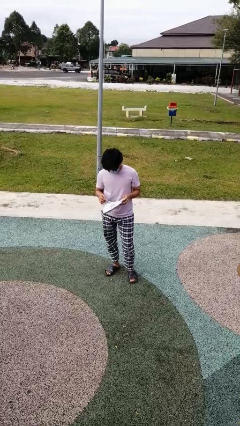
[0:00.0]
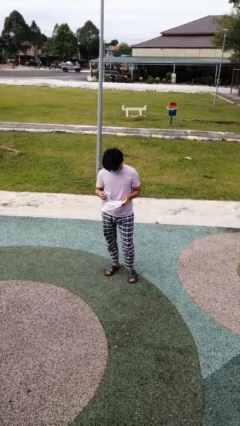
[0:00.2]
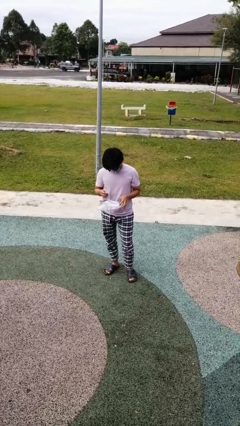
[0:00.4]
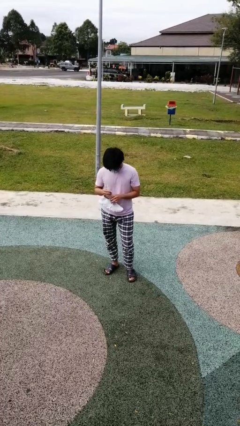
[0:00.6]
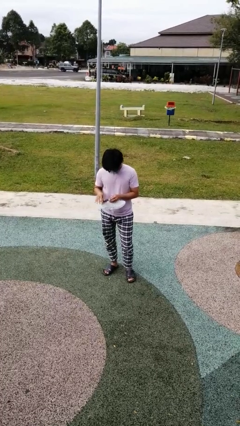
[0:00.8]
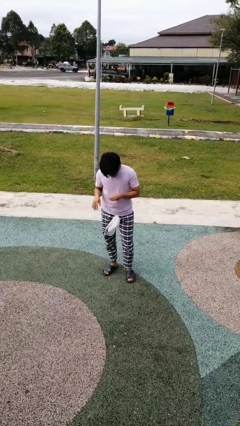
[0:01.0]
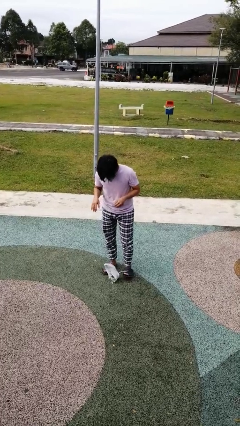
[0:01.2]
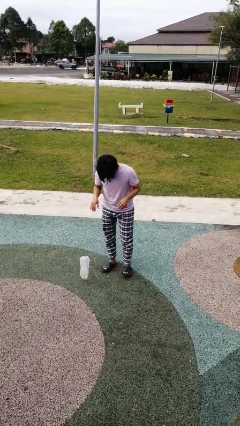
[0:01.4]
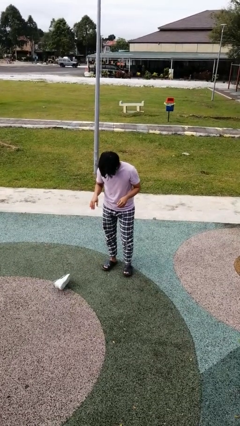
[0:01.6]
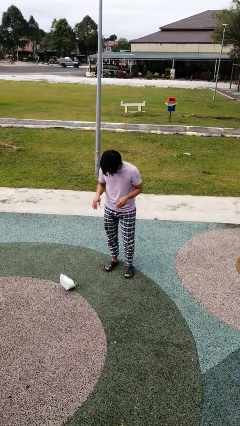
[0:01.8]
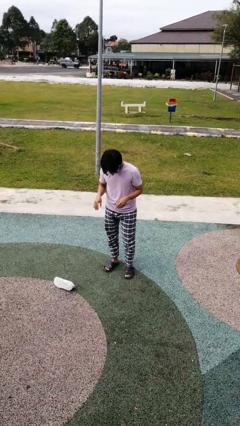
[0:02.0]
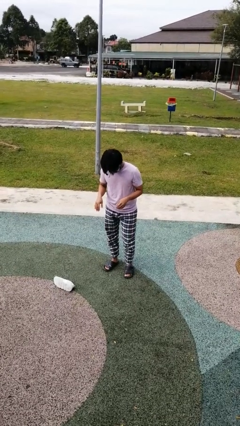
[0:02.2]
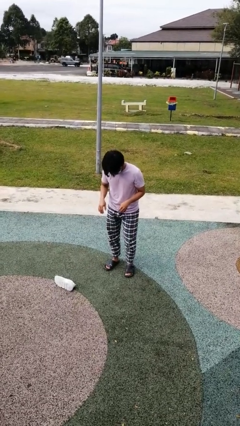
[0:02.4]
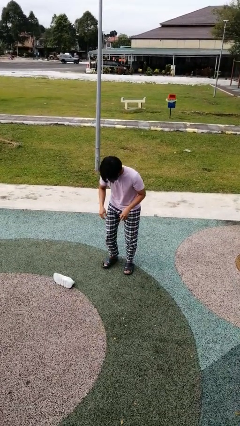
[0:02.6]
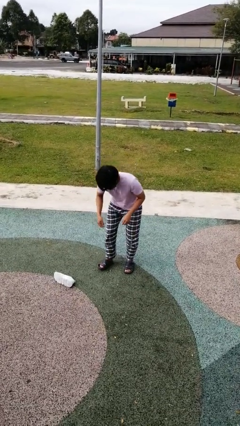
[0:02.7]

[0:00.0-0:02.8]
person drops object

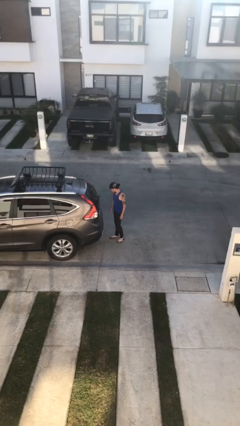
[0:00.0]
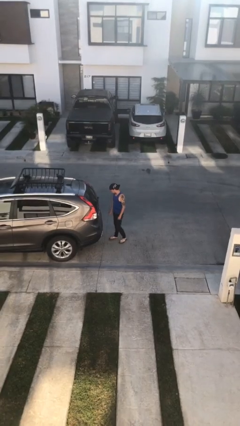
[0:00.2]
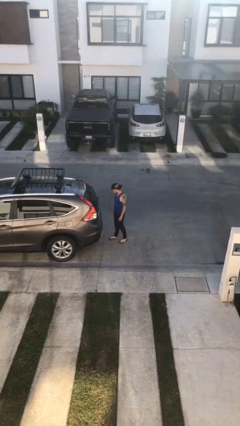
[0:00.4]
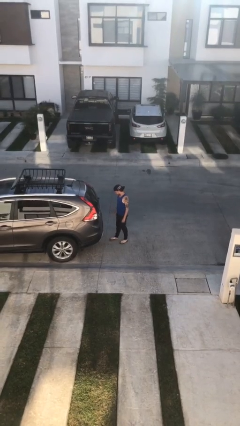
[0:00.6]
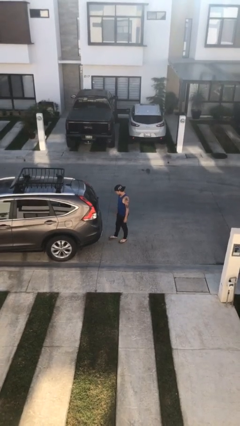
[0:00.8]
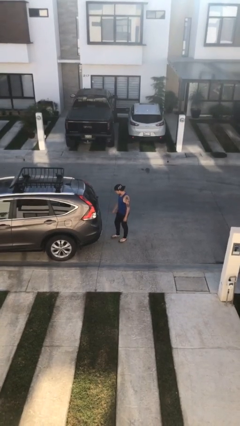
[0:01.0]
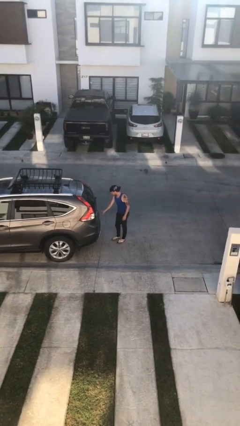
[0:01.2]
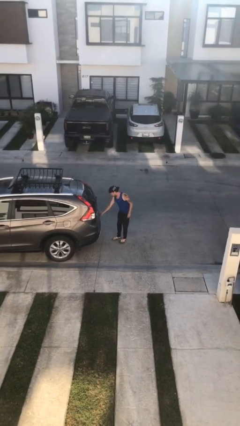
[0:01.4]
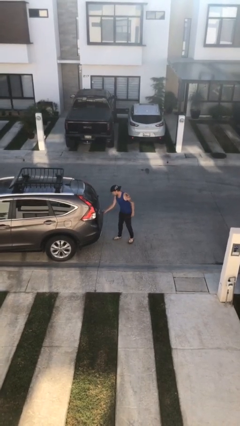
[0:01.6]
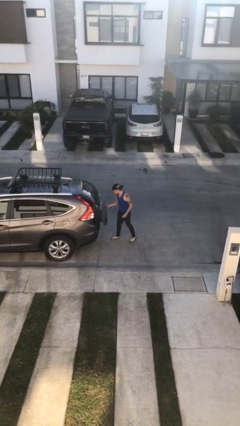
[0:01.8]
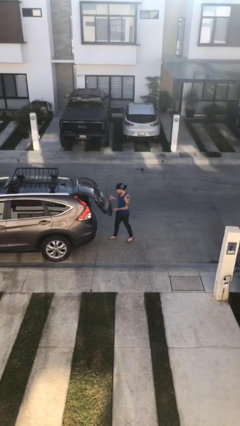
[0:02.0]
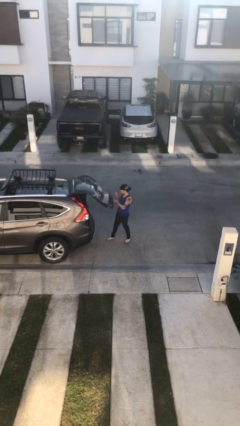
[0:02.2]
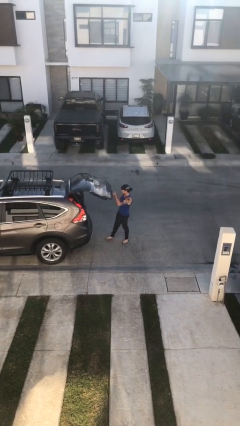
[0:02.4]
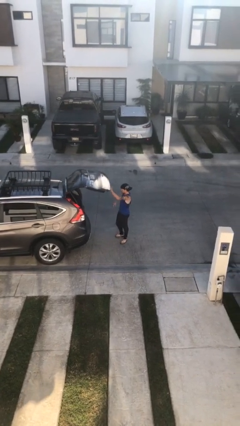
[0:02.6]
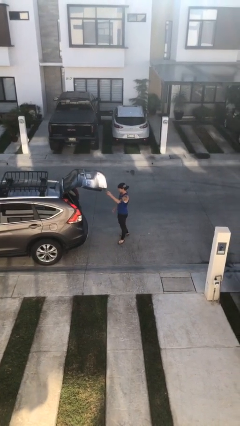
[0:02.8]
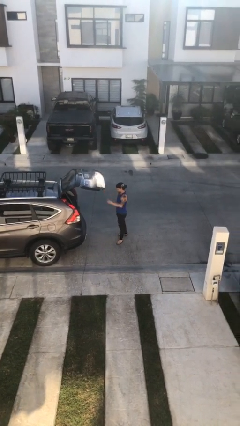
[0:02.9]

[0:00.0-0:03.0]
person opens car trunk

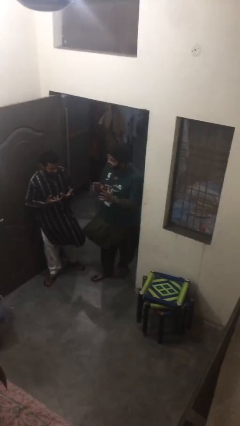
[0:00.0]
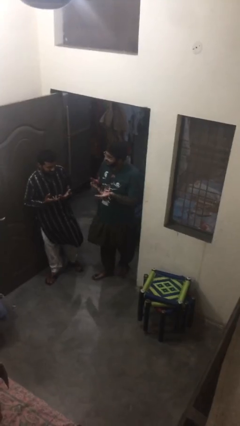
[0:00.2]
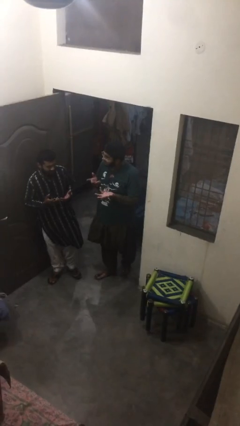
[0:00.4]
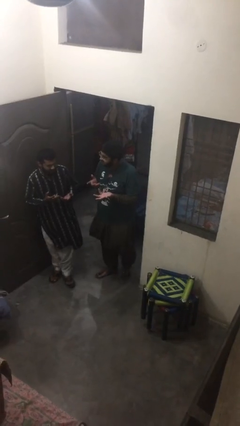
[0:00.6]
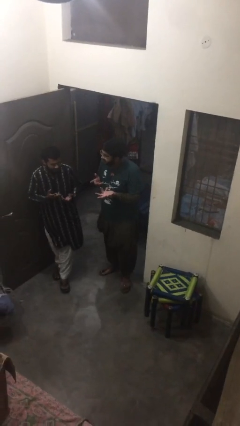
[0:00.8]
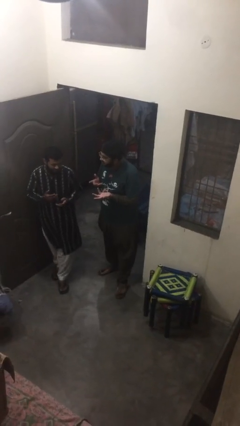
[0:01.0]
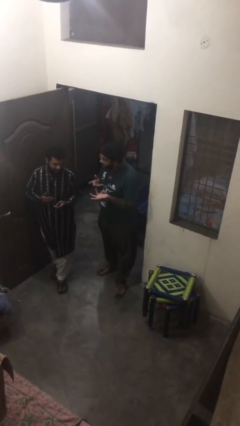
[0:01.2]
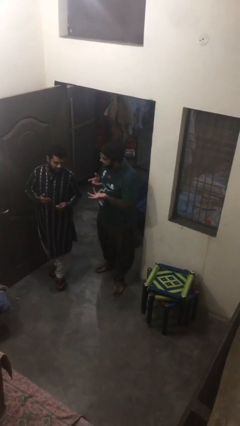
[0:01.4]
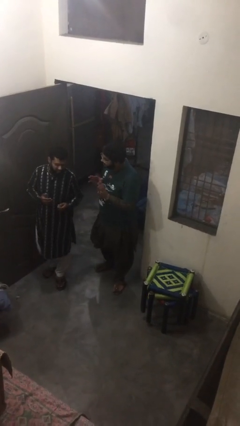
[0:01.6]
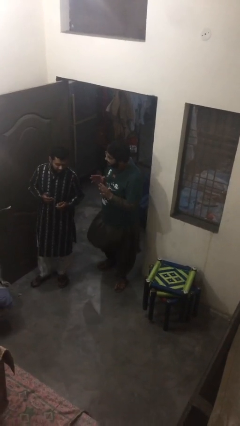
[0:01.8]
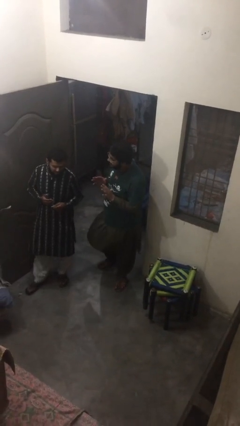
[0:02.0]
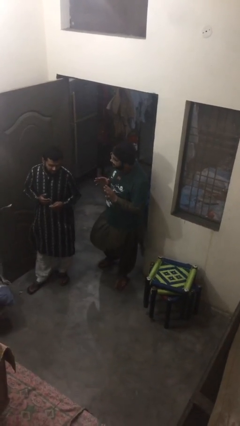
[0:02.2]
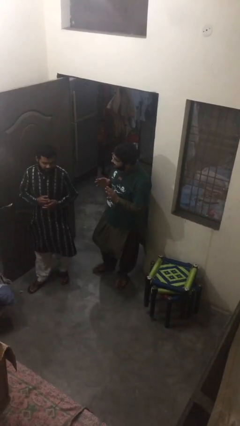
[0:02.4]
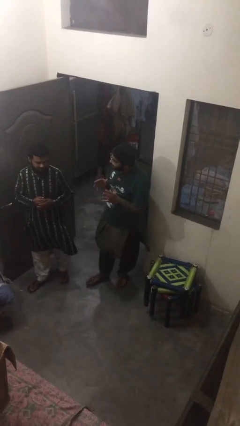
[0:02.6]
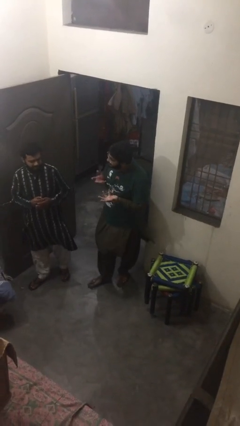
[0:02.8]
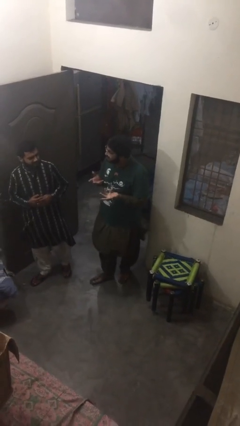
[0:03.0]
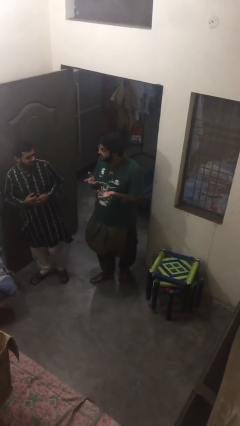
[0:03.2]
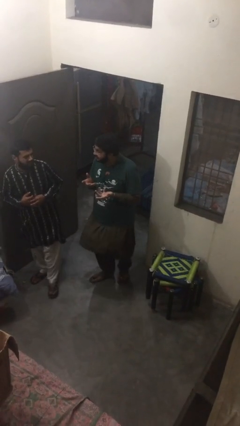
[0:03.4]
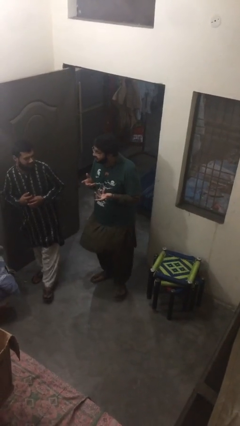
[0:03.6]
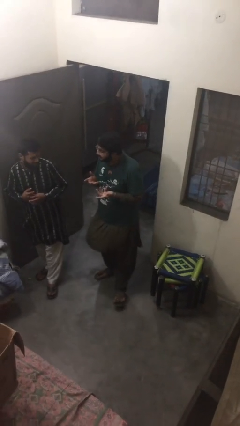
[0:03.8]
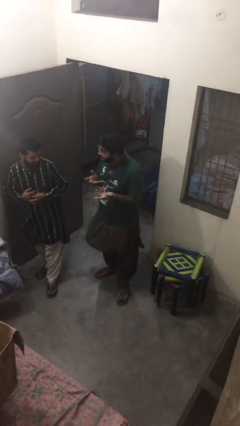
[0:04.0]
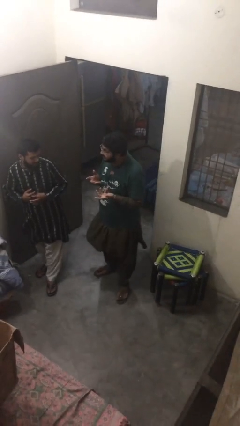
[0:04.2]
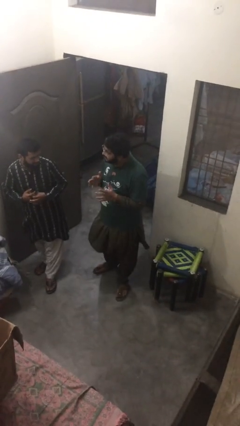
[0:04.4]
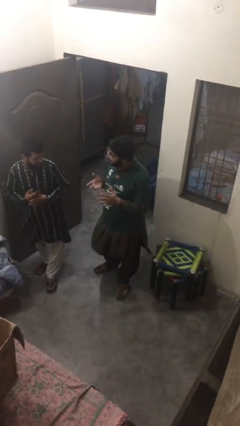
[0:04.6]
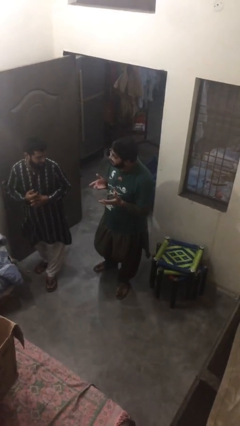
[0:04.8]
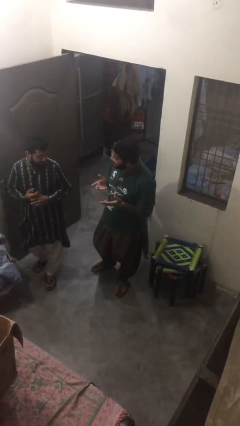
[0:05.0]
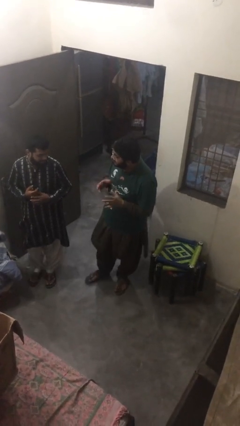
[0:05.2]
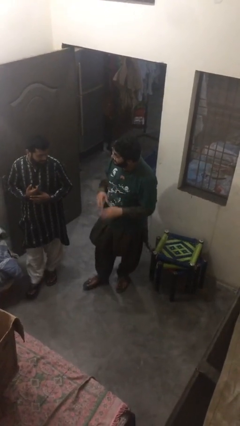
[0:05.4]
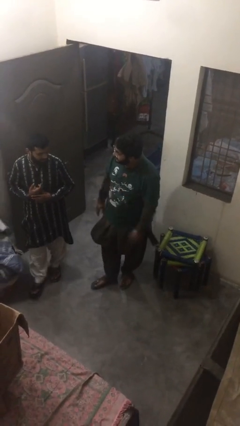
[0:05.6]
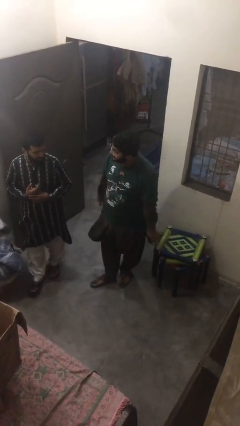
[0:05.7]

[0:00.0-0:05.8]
person talks to person

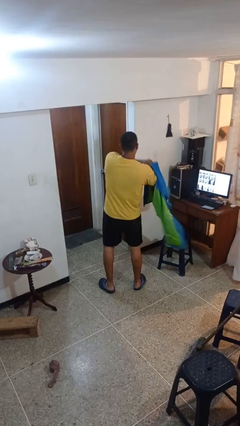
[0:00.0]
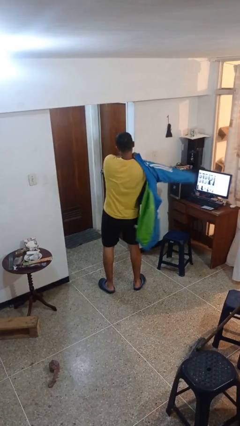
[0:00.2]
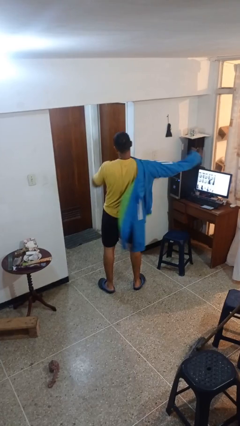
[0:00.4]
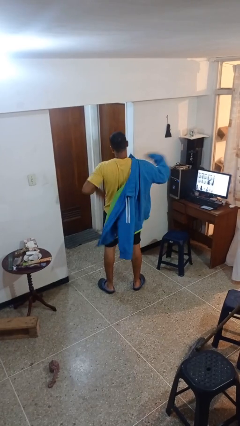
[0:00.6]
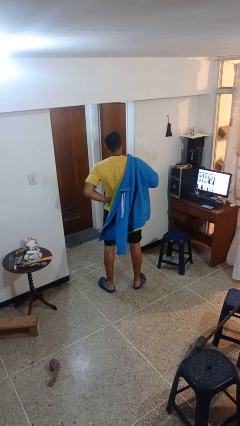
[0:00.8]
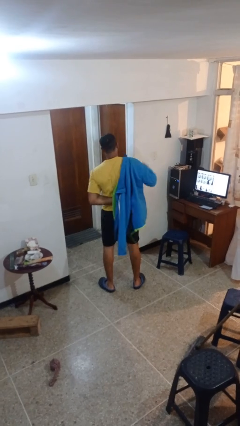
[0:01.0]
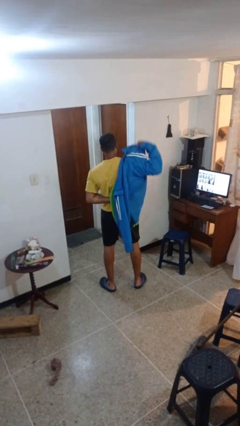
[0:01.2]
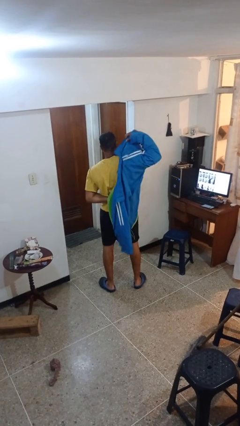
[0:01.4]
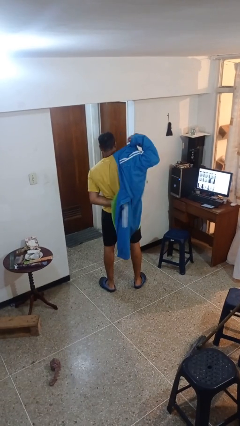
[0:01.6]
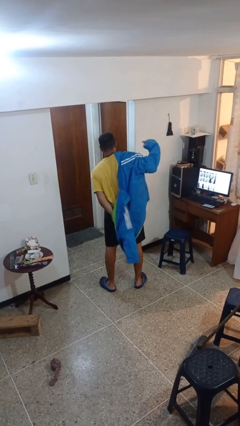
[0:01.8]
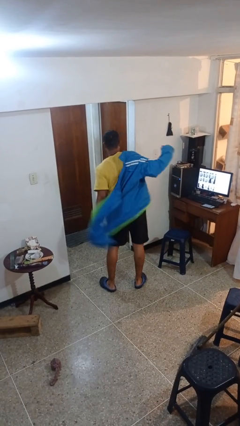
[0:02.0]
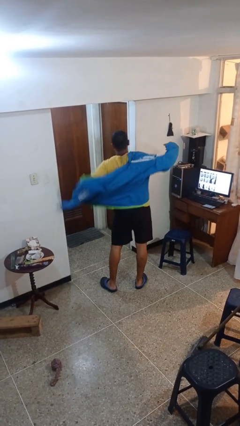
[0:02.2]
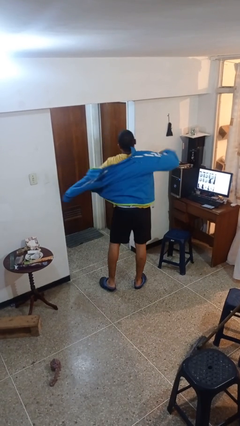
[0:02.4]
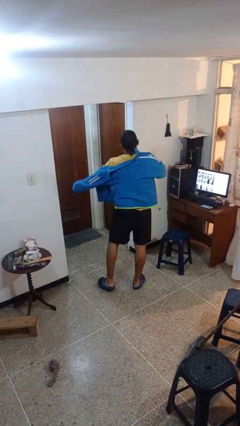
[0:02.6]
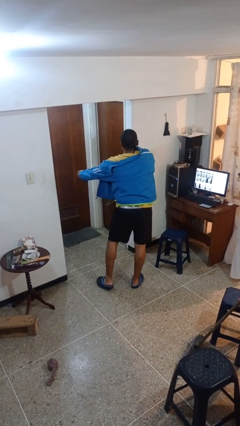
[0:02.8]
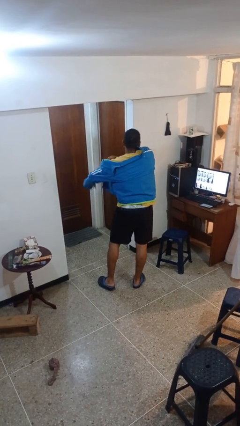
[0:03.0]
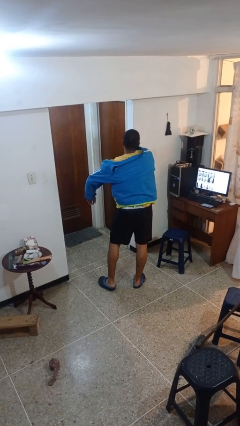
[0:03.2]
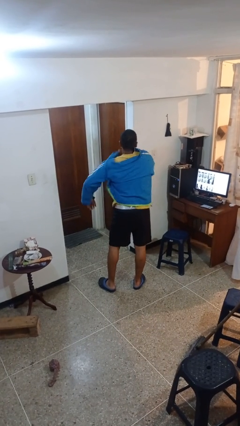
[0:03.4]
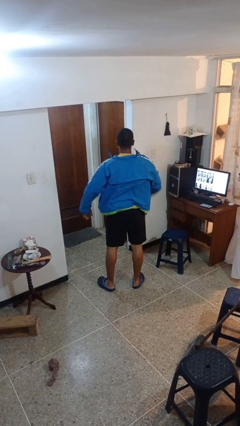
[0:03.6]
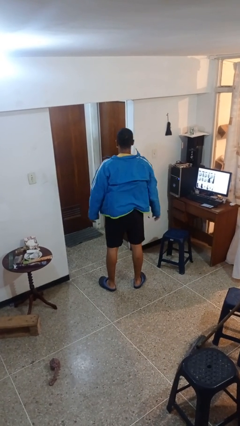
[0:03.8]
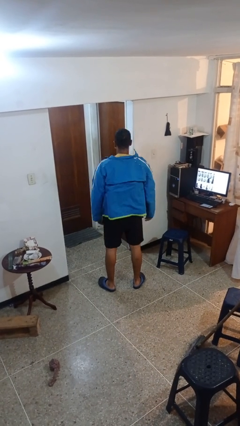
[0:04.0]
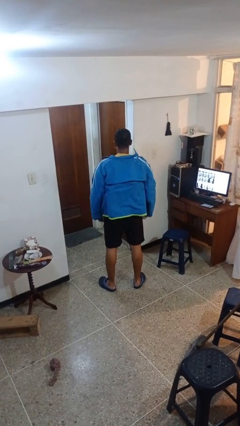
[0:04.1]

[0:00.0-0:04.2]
person puts on jacket

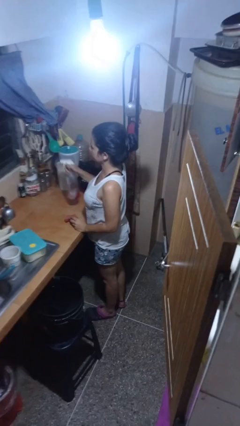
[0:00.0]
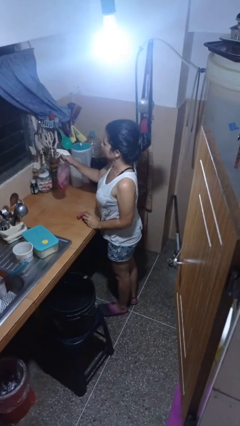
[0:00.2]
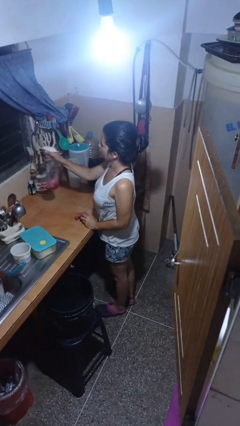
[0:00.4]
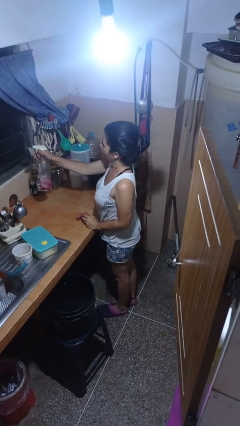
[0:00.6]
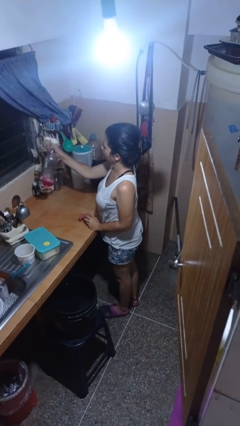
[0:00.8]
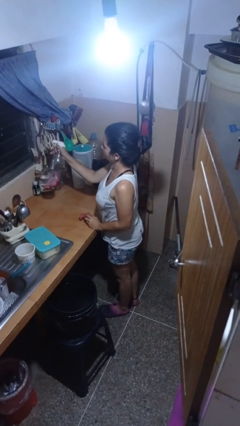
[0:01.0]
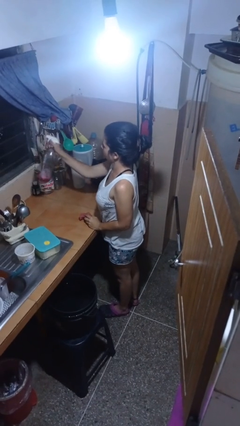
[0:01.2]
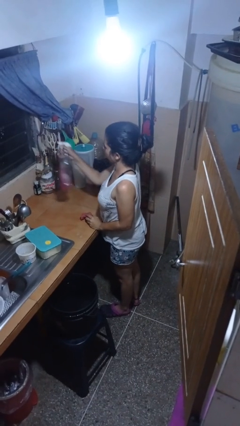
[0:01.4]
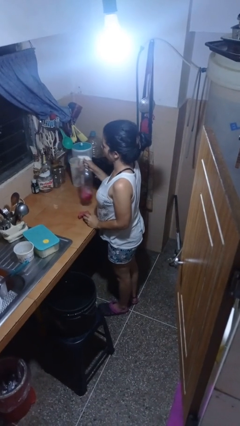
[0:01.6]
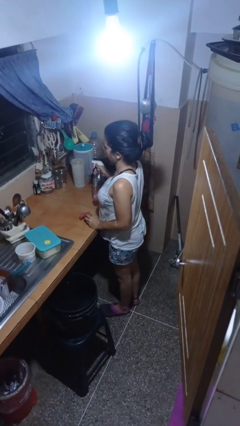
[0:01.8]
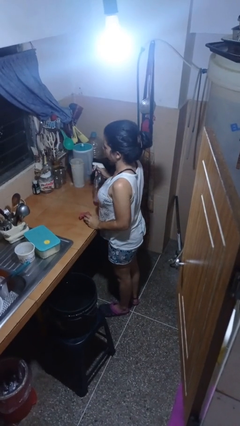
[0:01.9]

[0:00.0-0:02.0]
person sprays from bottle
